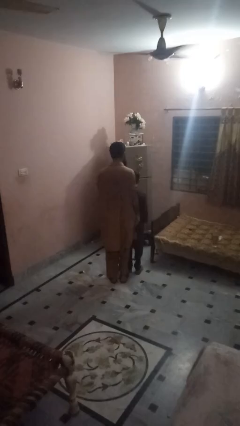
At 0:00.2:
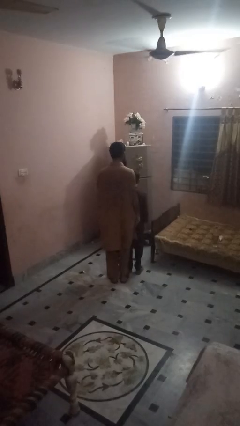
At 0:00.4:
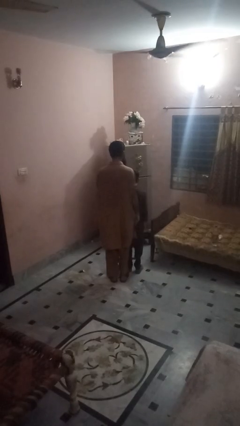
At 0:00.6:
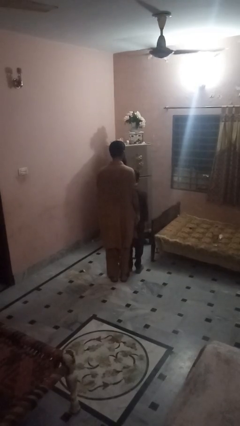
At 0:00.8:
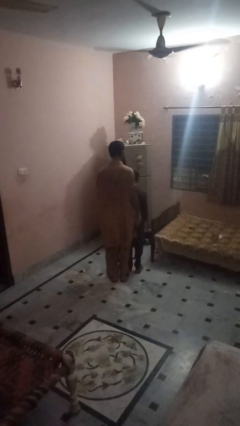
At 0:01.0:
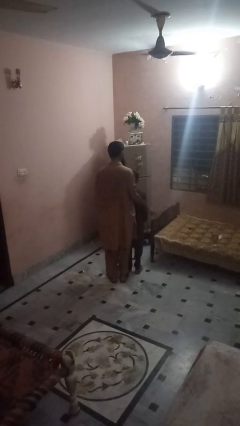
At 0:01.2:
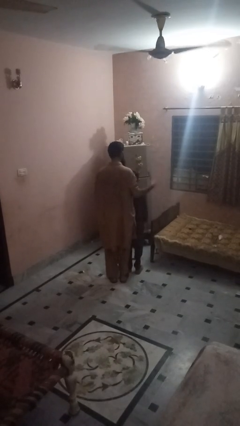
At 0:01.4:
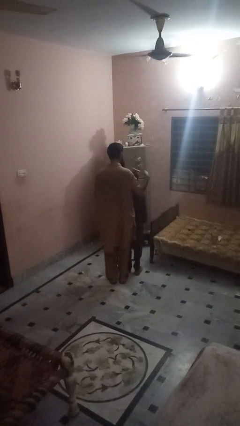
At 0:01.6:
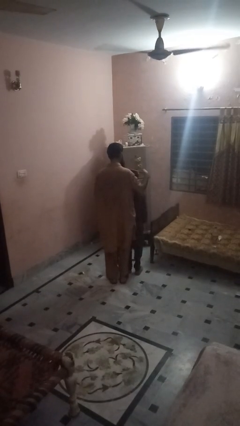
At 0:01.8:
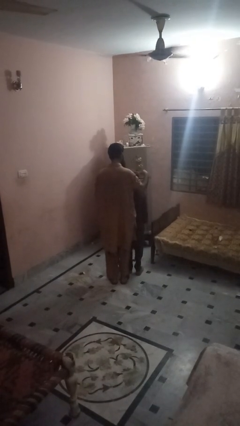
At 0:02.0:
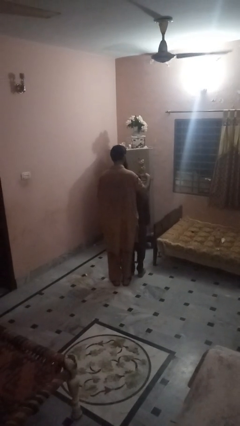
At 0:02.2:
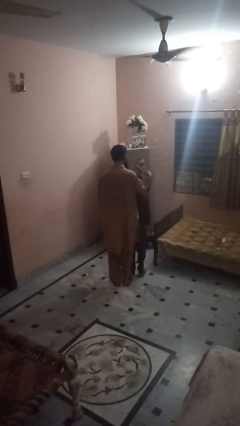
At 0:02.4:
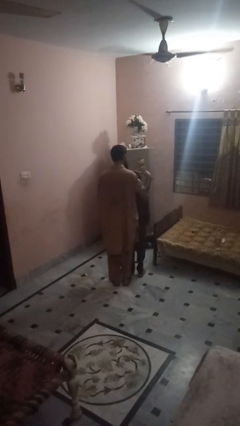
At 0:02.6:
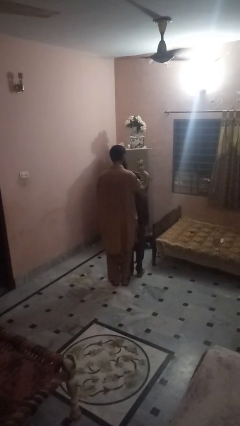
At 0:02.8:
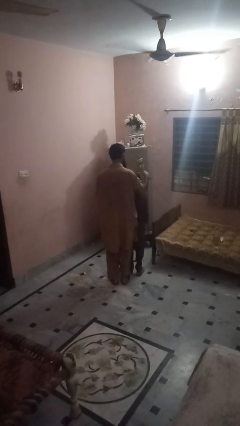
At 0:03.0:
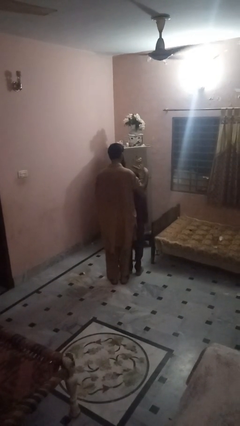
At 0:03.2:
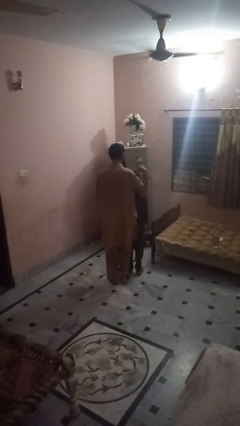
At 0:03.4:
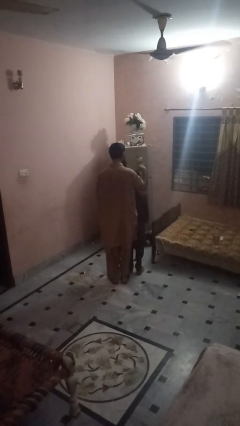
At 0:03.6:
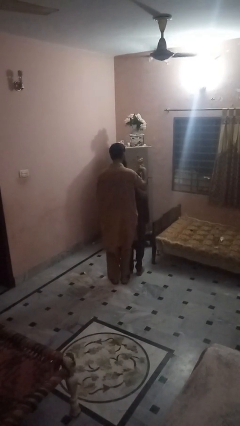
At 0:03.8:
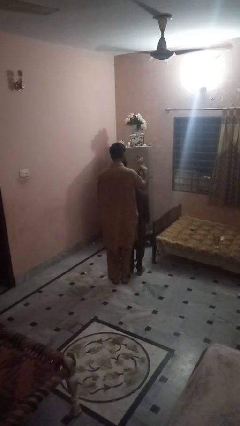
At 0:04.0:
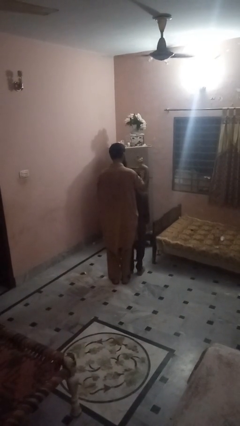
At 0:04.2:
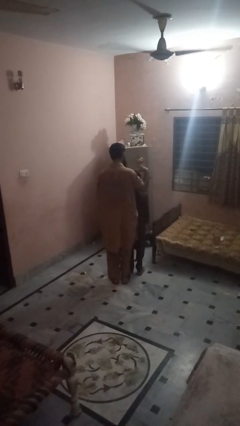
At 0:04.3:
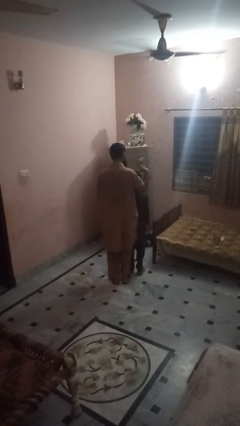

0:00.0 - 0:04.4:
person brushes hair of person

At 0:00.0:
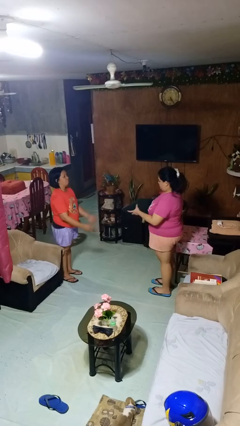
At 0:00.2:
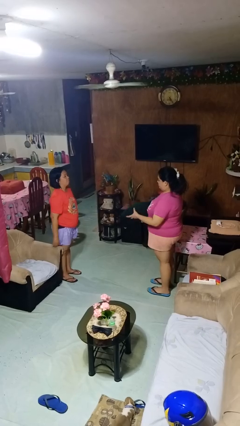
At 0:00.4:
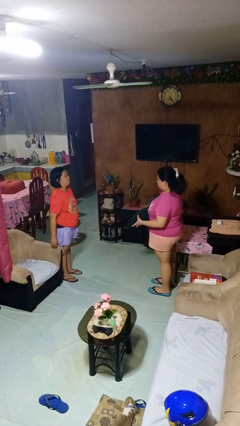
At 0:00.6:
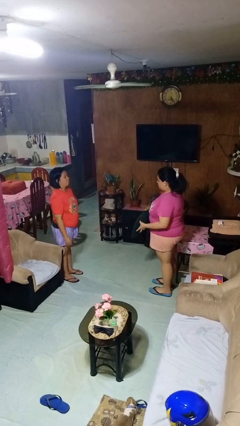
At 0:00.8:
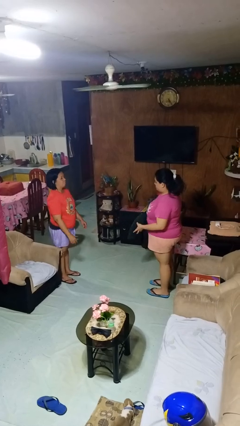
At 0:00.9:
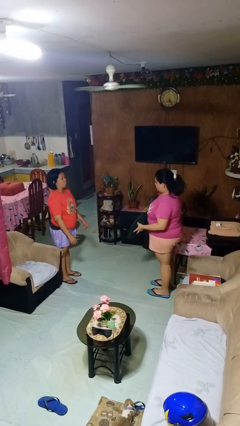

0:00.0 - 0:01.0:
person catches object from person

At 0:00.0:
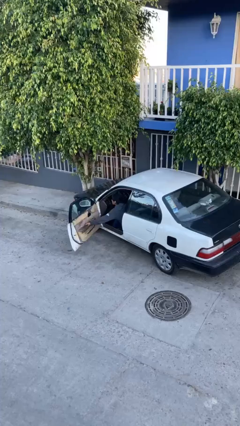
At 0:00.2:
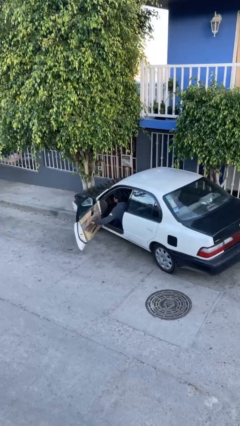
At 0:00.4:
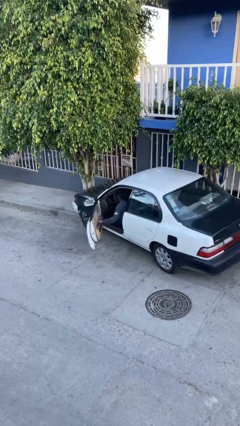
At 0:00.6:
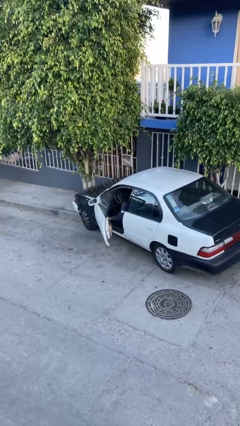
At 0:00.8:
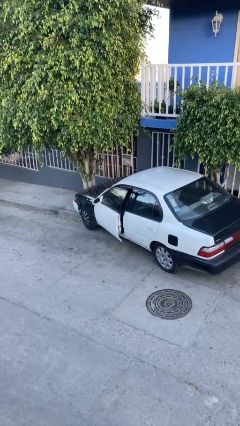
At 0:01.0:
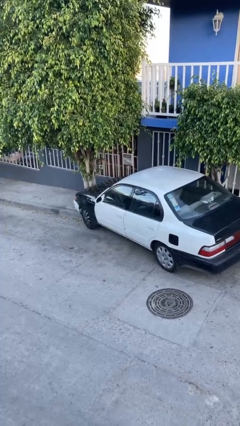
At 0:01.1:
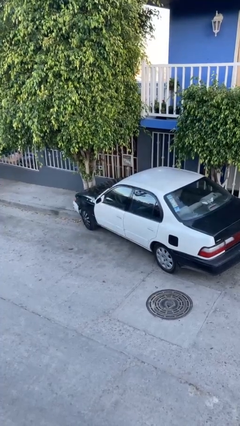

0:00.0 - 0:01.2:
person closes car door

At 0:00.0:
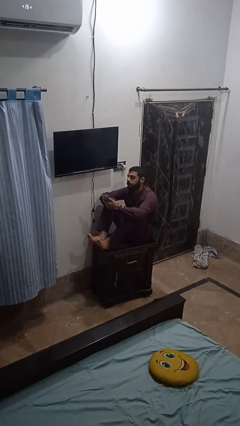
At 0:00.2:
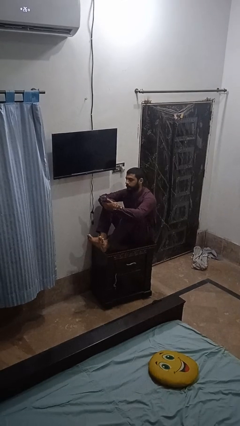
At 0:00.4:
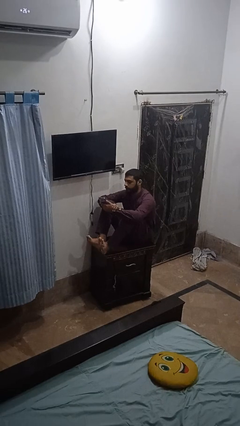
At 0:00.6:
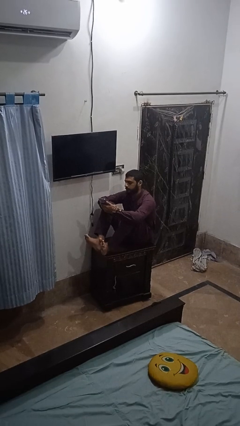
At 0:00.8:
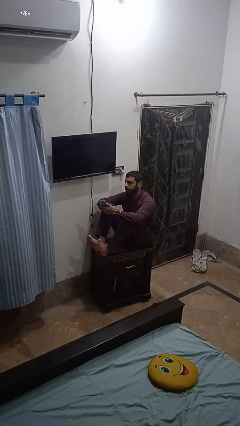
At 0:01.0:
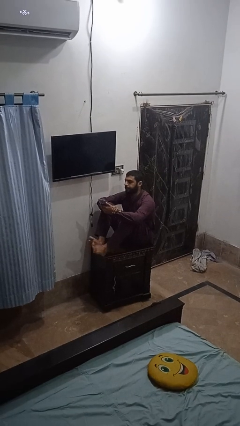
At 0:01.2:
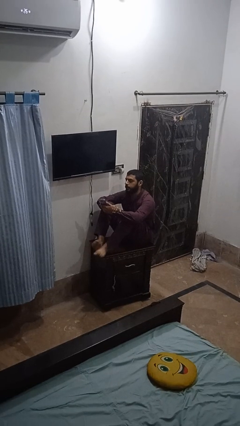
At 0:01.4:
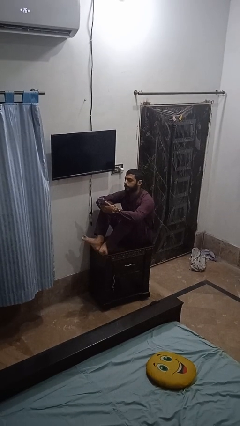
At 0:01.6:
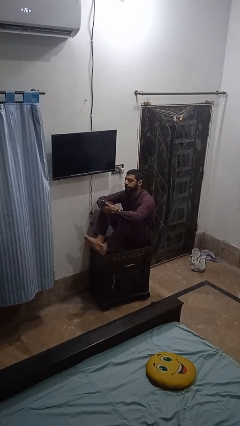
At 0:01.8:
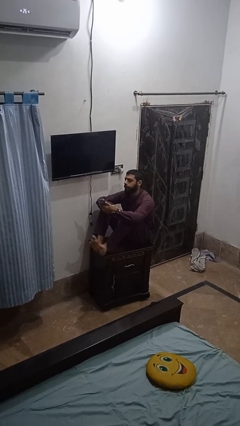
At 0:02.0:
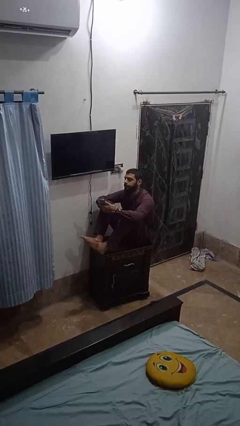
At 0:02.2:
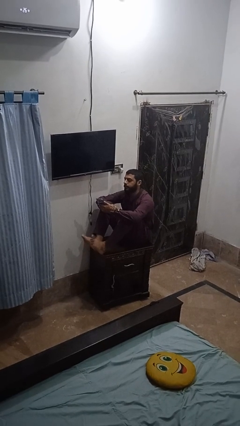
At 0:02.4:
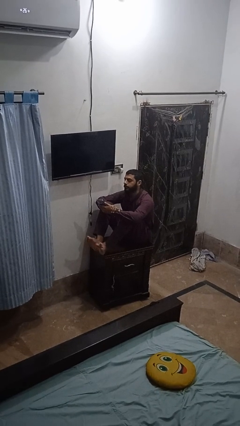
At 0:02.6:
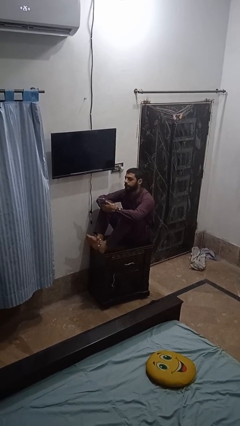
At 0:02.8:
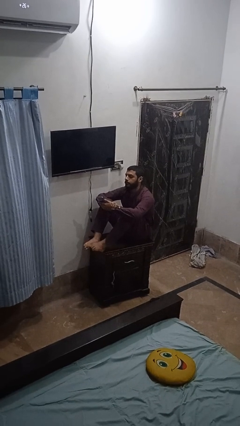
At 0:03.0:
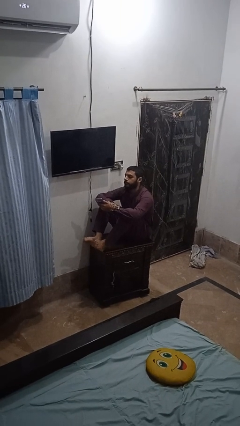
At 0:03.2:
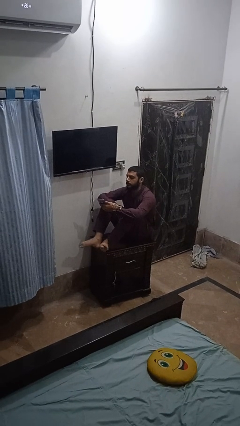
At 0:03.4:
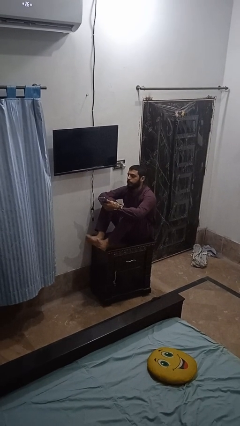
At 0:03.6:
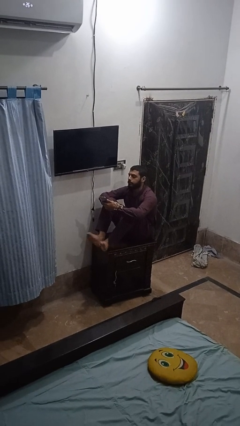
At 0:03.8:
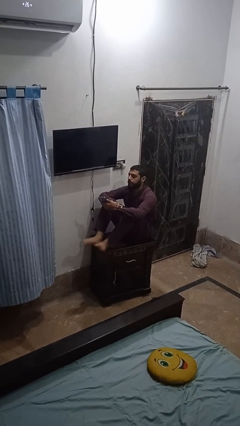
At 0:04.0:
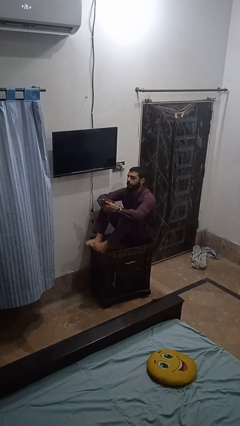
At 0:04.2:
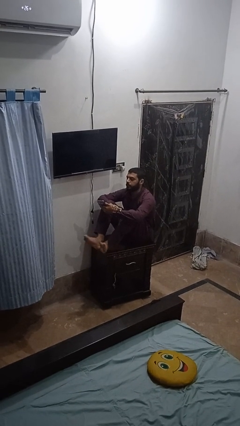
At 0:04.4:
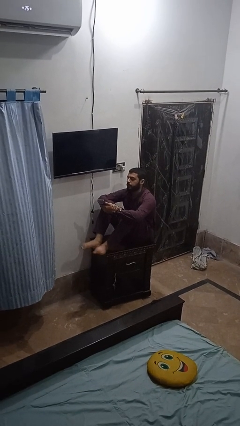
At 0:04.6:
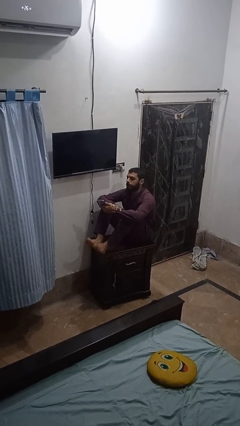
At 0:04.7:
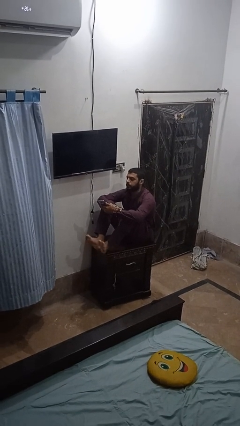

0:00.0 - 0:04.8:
person twirls

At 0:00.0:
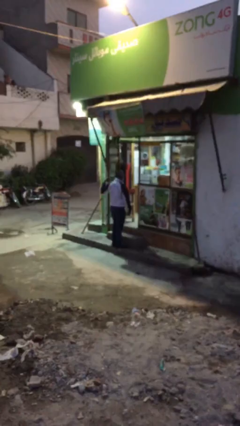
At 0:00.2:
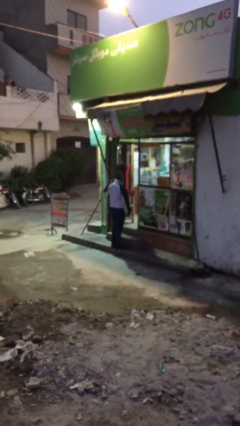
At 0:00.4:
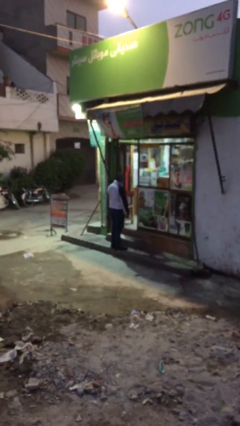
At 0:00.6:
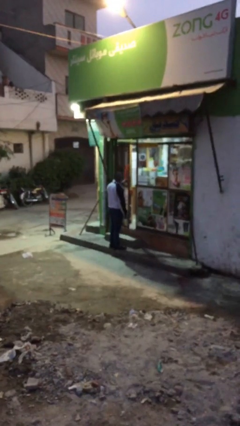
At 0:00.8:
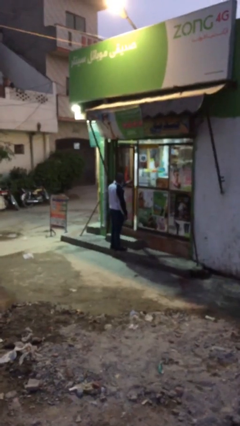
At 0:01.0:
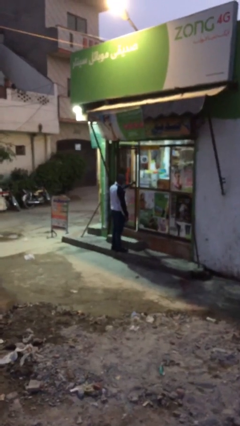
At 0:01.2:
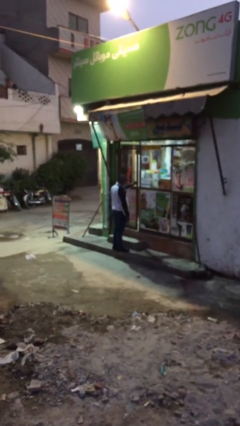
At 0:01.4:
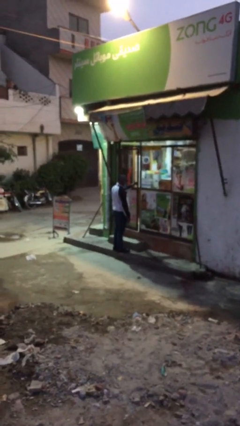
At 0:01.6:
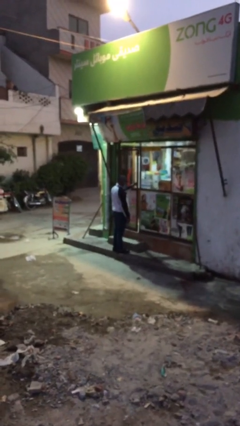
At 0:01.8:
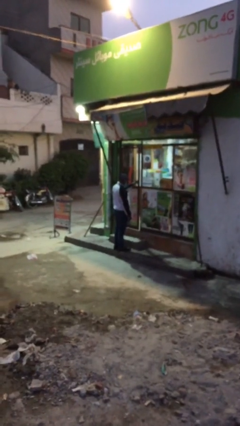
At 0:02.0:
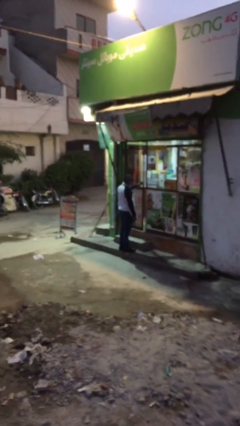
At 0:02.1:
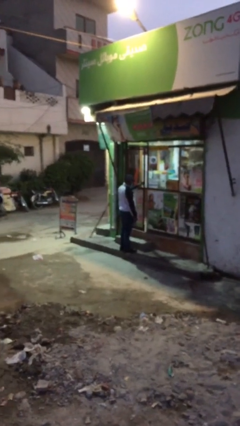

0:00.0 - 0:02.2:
person closes facility door

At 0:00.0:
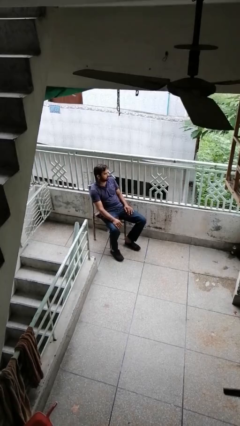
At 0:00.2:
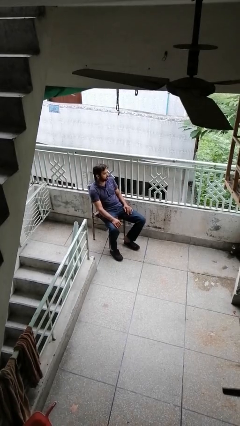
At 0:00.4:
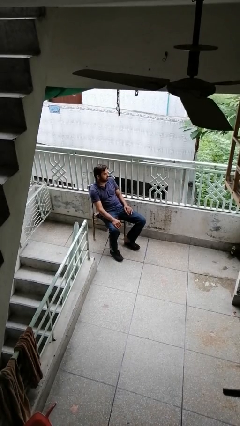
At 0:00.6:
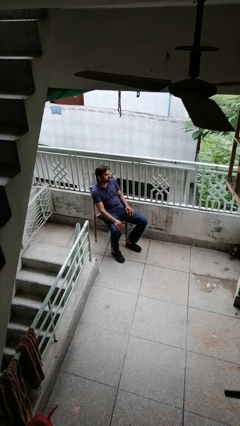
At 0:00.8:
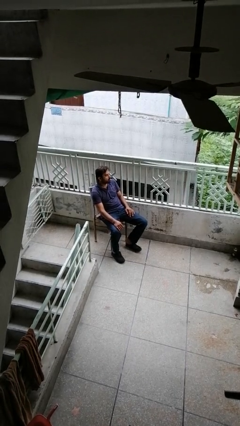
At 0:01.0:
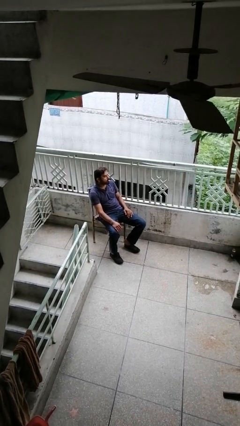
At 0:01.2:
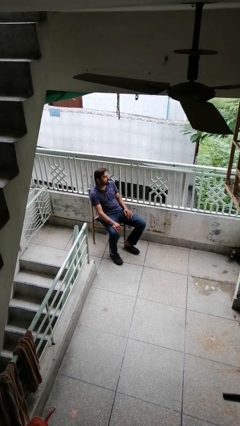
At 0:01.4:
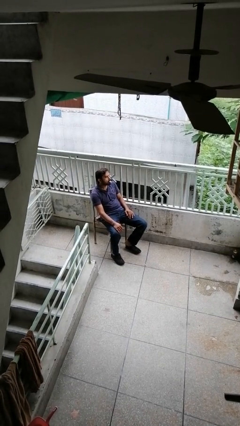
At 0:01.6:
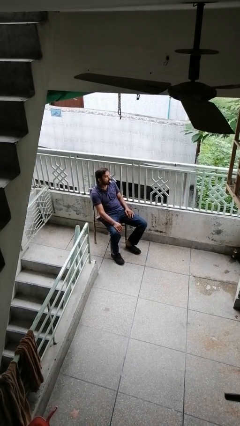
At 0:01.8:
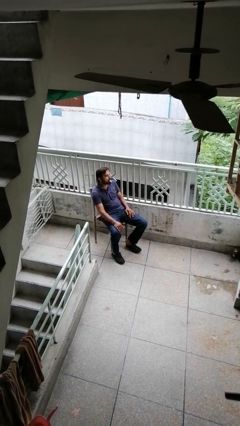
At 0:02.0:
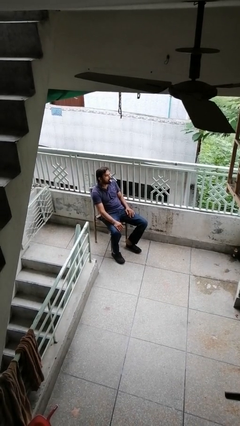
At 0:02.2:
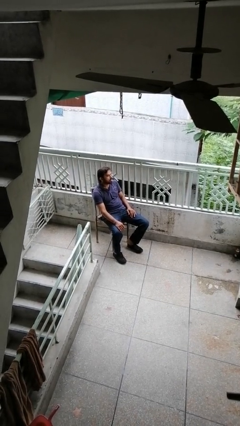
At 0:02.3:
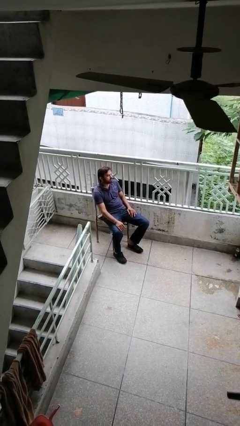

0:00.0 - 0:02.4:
person sticks out tongue

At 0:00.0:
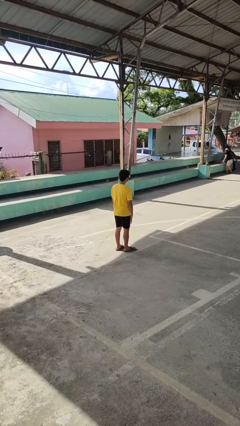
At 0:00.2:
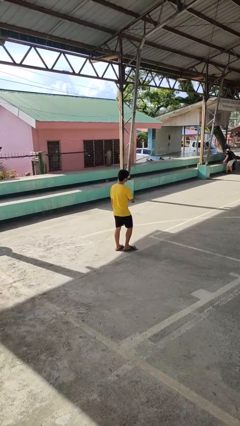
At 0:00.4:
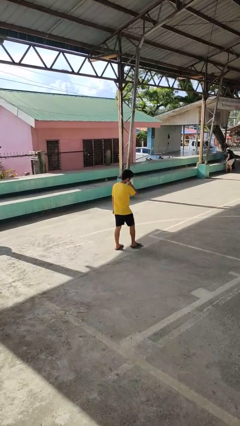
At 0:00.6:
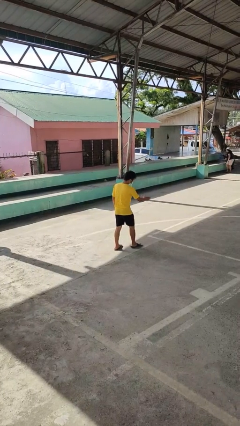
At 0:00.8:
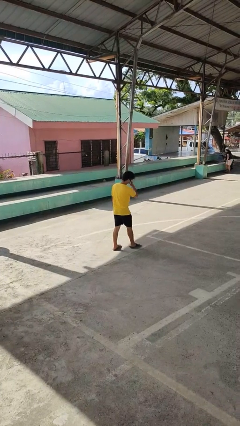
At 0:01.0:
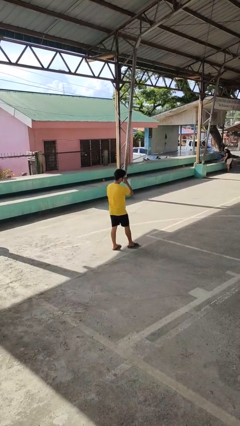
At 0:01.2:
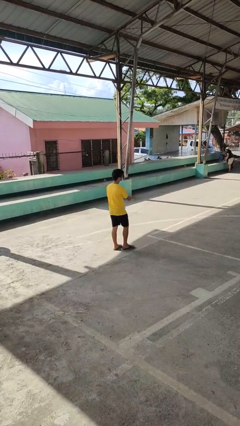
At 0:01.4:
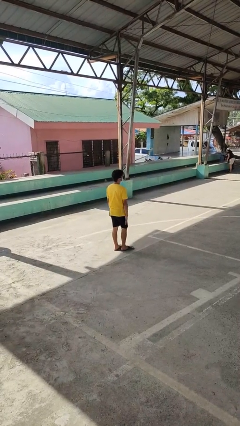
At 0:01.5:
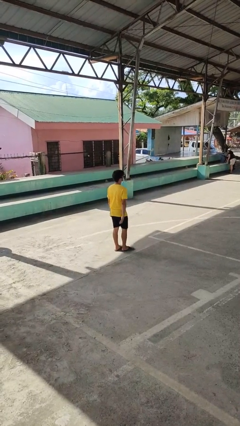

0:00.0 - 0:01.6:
person karate chop
